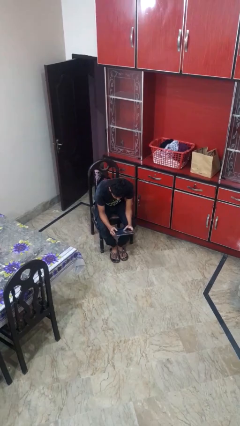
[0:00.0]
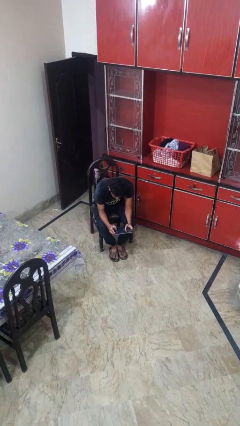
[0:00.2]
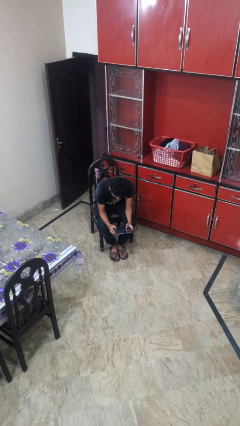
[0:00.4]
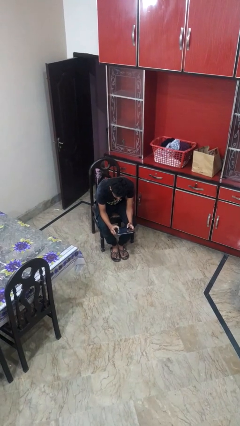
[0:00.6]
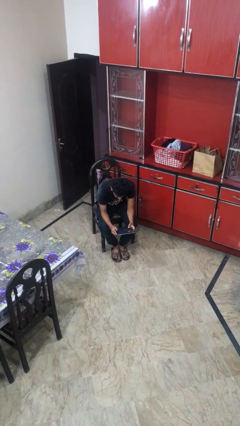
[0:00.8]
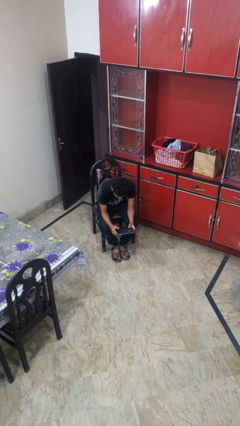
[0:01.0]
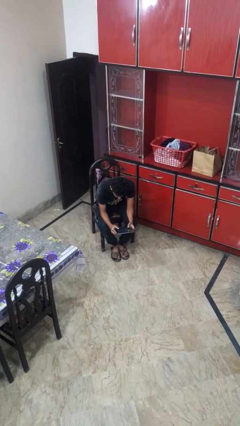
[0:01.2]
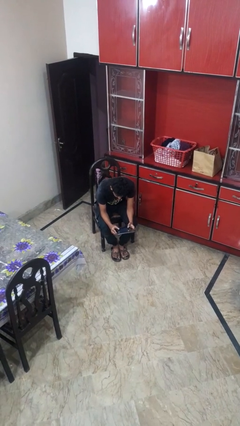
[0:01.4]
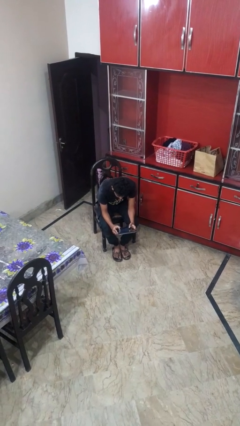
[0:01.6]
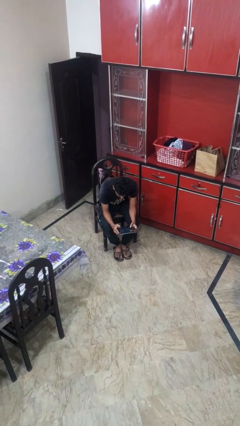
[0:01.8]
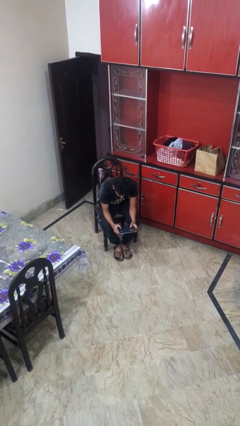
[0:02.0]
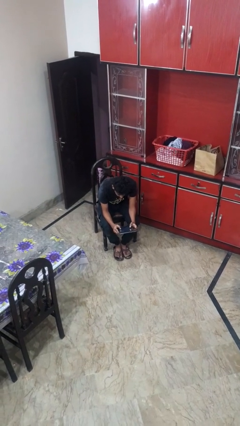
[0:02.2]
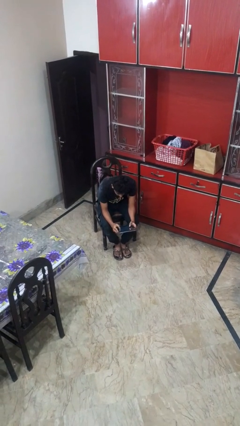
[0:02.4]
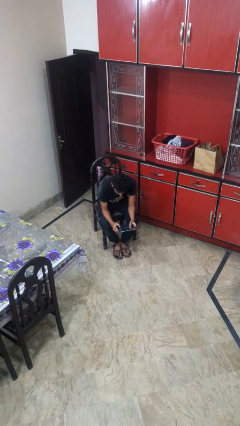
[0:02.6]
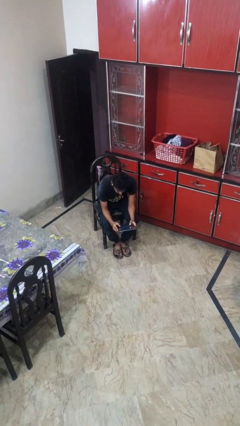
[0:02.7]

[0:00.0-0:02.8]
person interacts with tablet

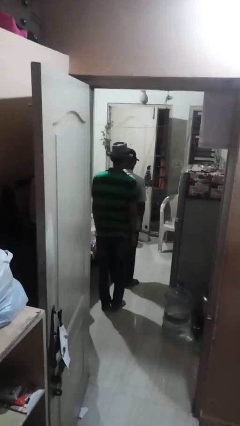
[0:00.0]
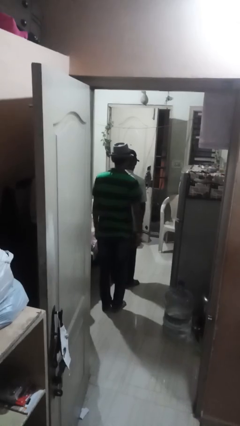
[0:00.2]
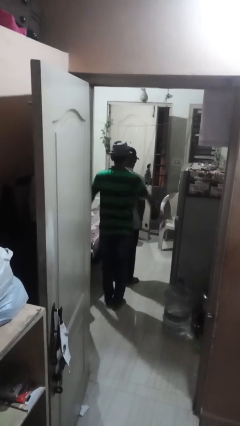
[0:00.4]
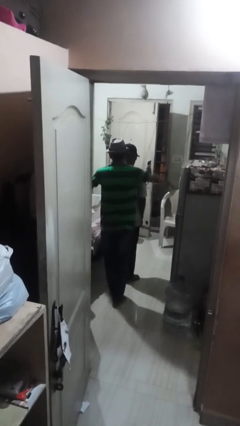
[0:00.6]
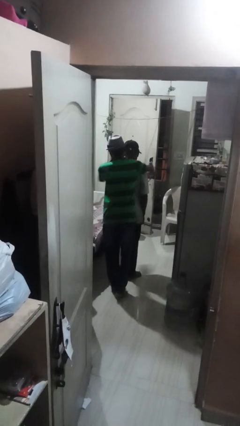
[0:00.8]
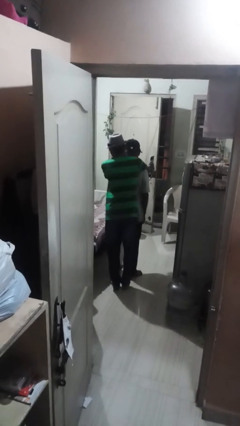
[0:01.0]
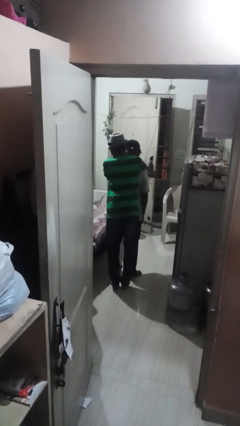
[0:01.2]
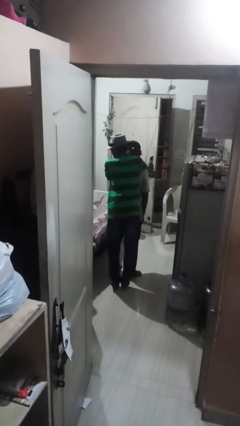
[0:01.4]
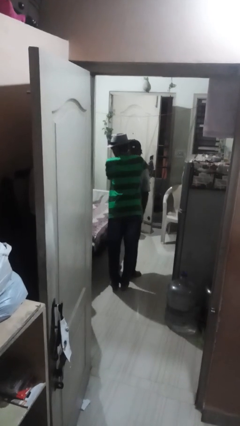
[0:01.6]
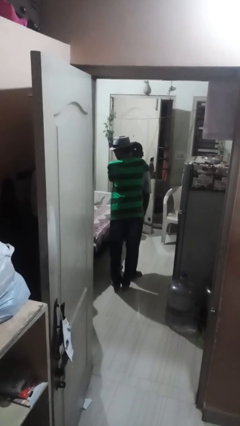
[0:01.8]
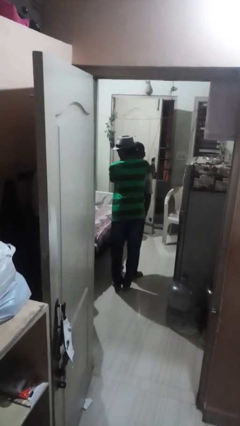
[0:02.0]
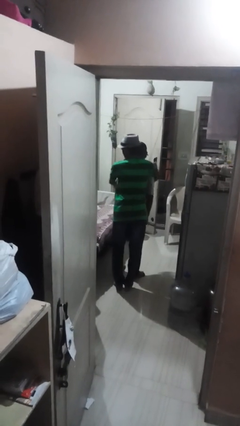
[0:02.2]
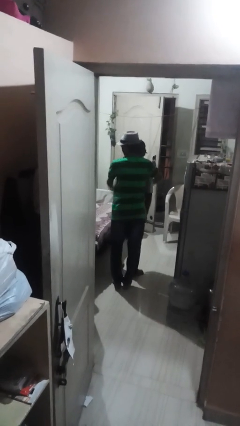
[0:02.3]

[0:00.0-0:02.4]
person hugs person from behind

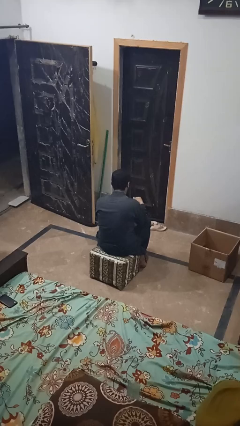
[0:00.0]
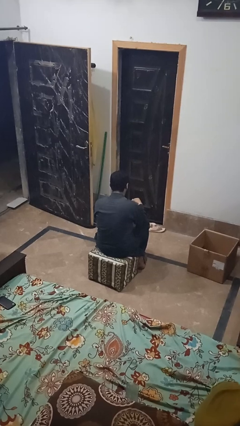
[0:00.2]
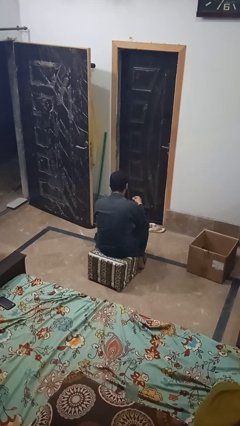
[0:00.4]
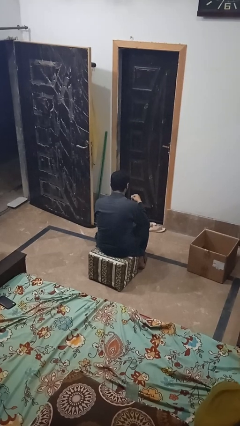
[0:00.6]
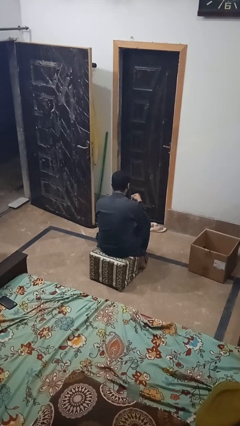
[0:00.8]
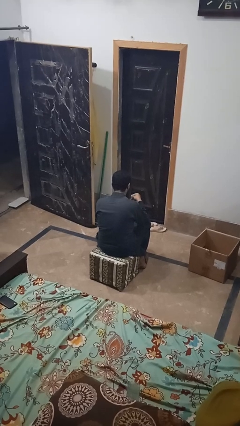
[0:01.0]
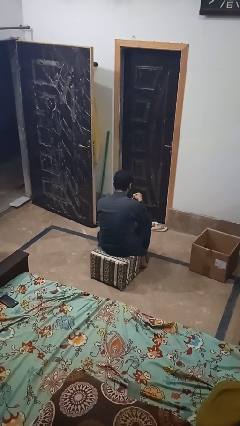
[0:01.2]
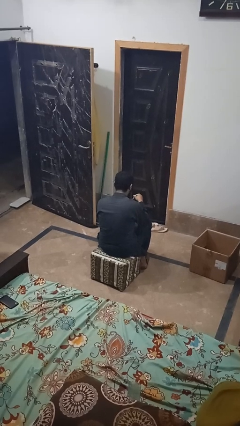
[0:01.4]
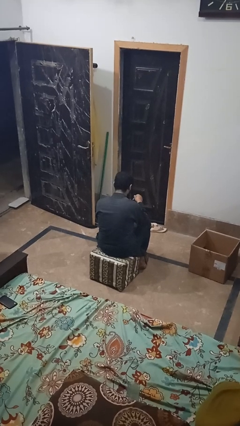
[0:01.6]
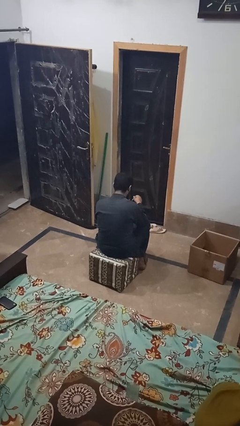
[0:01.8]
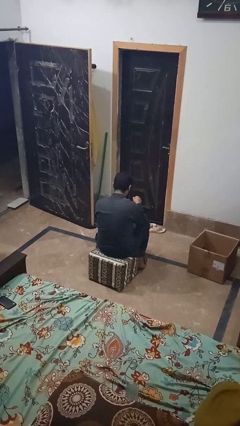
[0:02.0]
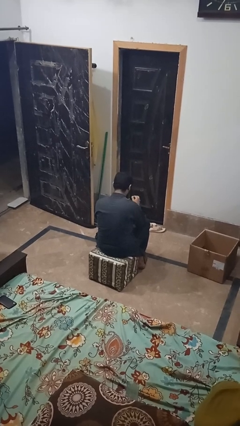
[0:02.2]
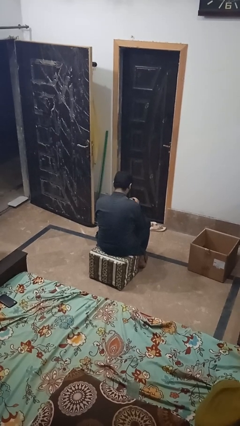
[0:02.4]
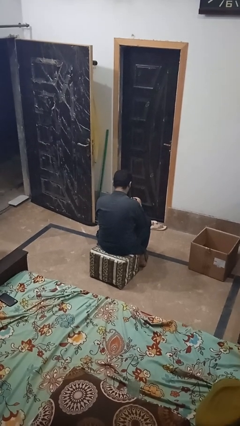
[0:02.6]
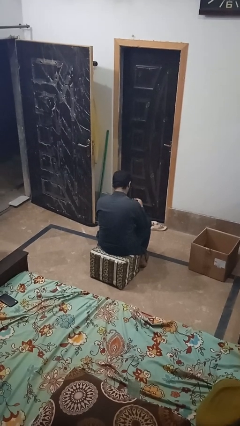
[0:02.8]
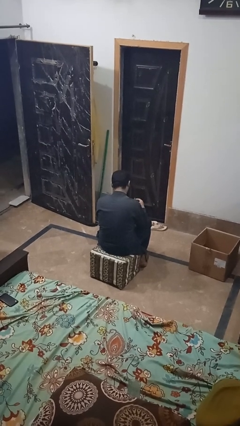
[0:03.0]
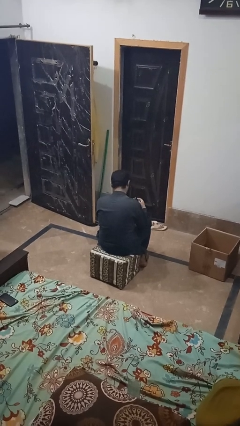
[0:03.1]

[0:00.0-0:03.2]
person stirs mug

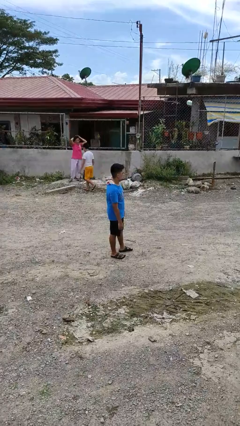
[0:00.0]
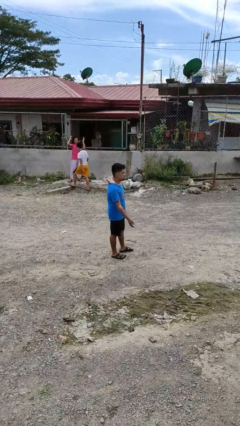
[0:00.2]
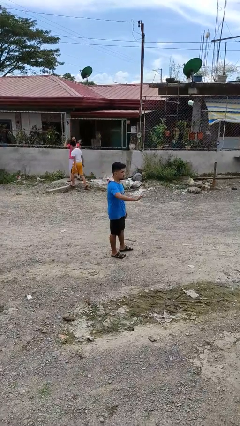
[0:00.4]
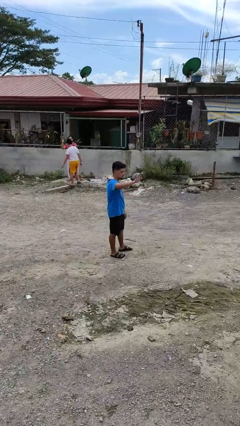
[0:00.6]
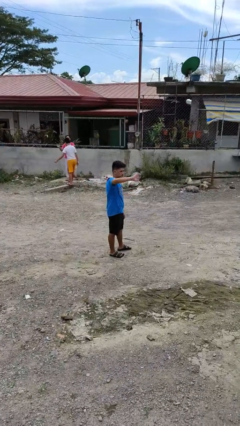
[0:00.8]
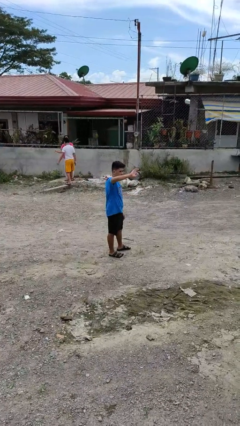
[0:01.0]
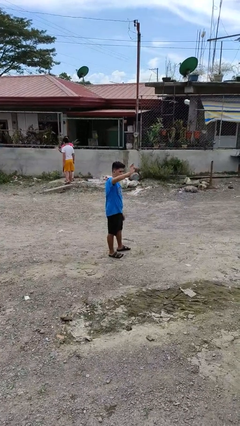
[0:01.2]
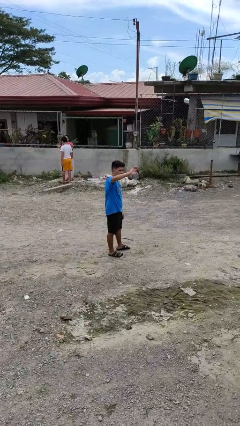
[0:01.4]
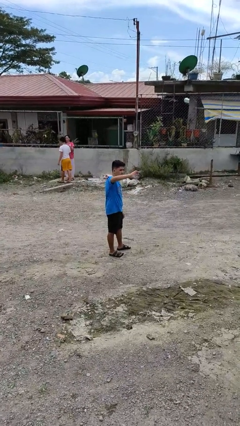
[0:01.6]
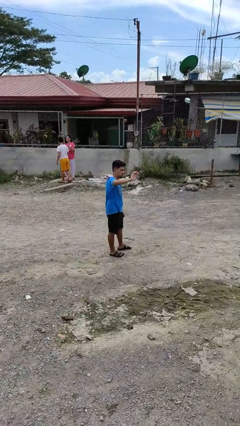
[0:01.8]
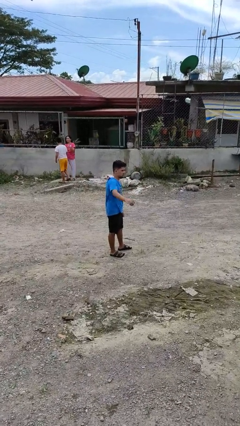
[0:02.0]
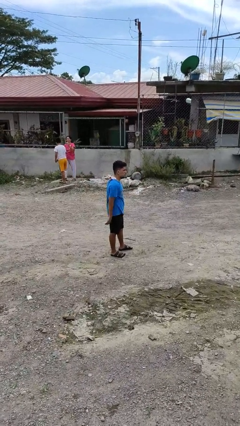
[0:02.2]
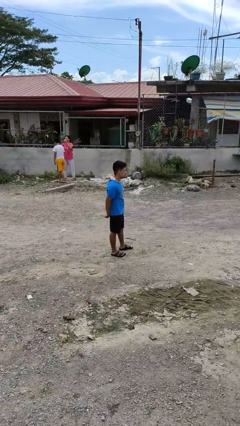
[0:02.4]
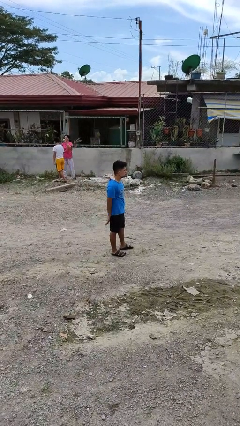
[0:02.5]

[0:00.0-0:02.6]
person waves at person

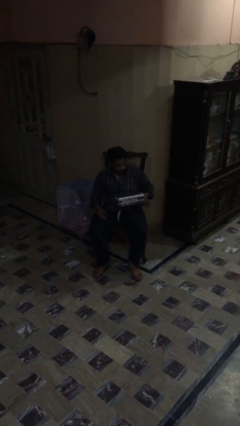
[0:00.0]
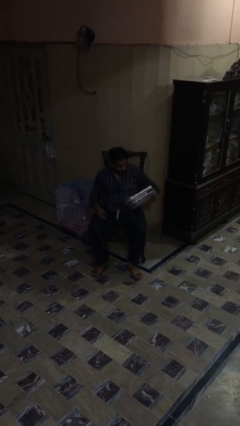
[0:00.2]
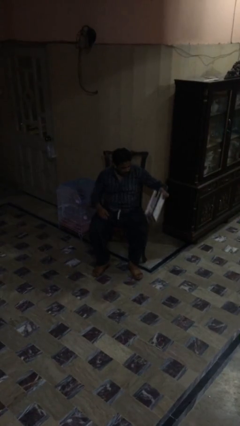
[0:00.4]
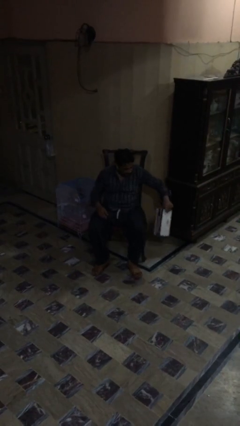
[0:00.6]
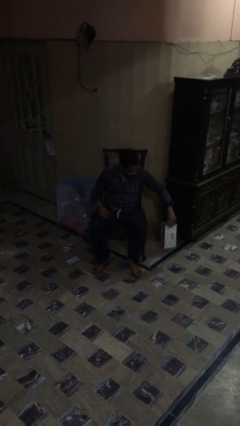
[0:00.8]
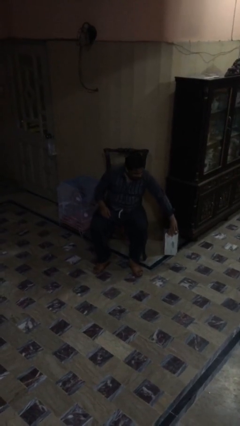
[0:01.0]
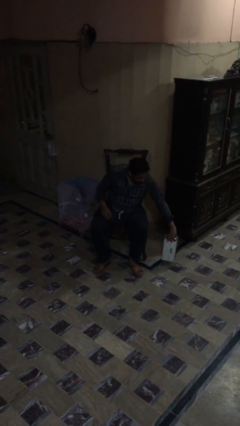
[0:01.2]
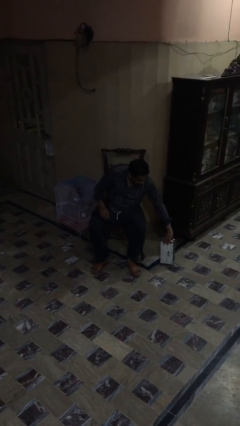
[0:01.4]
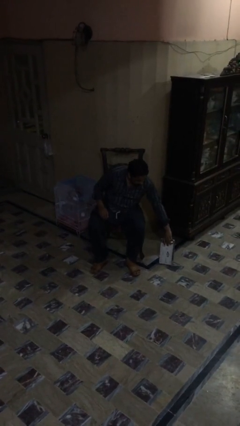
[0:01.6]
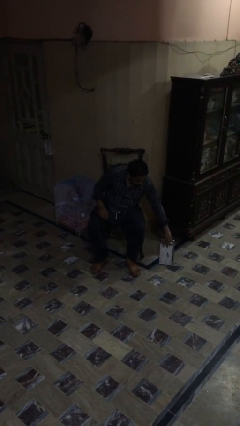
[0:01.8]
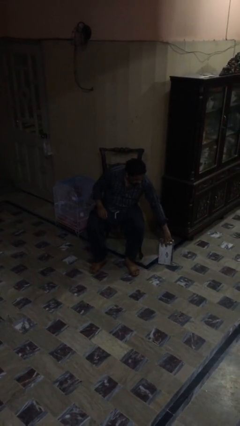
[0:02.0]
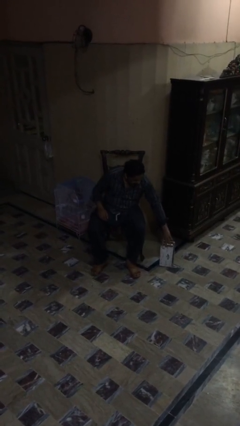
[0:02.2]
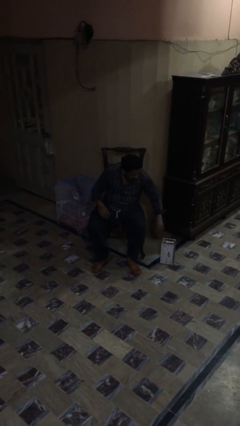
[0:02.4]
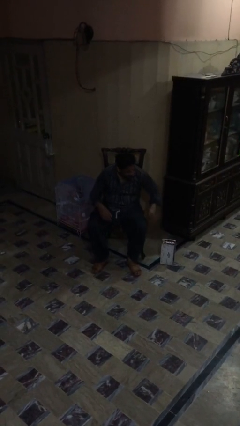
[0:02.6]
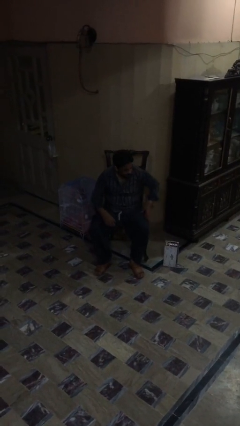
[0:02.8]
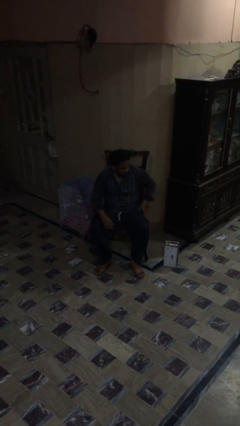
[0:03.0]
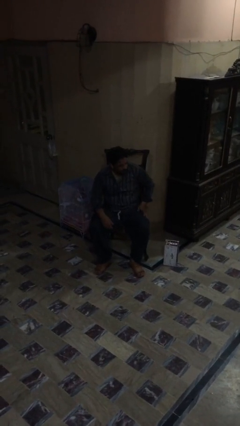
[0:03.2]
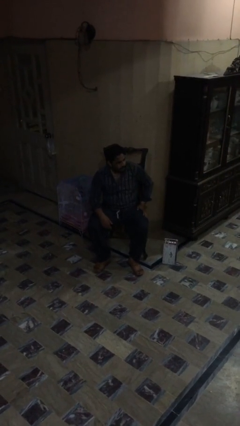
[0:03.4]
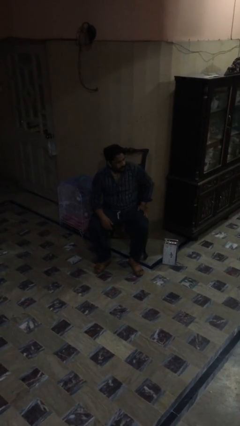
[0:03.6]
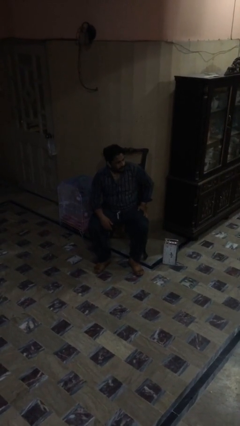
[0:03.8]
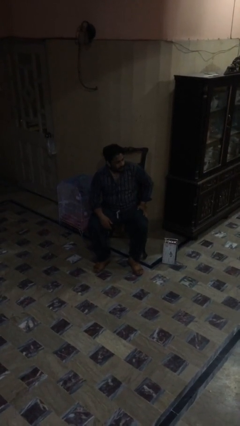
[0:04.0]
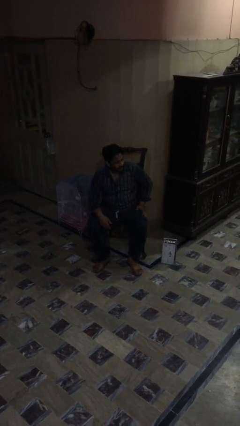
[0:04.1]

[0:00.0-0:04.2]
person puts down object on floor

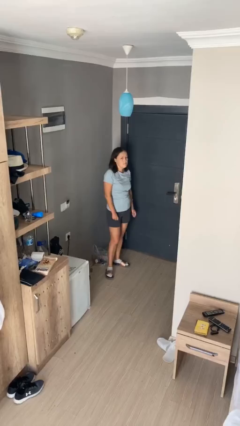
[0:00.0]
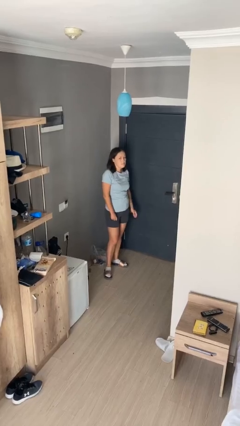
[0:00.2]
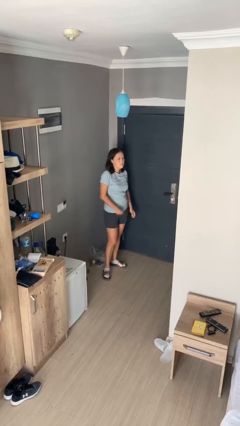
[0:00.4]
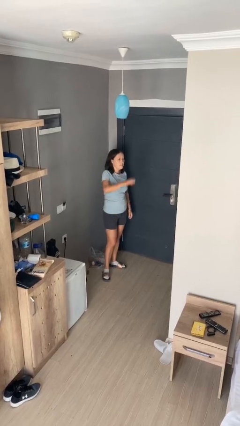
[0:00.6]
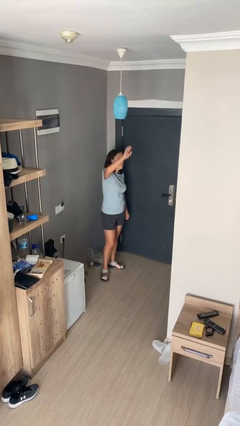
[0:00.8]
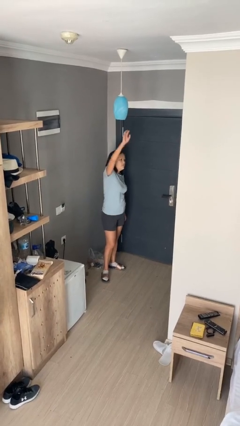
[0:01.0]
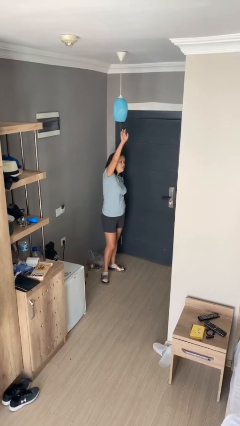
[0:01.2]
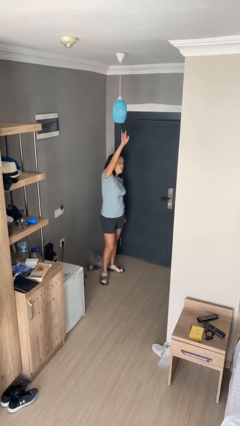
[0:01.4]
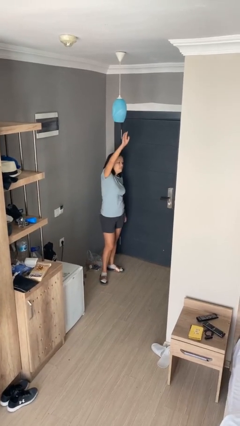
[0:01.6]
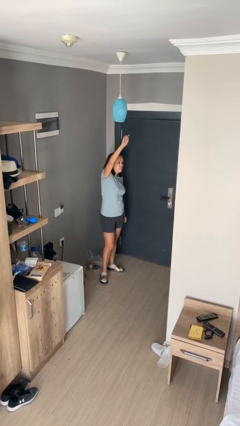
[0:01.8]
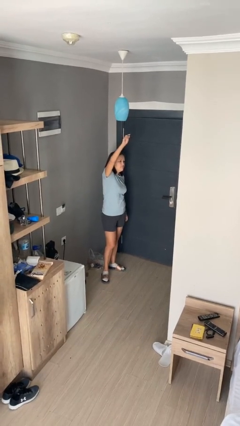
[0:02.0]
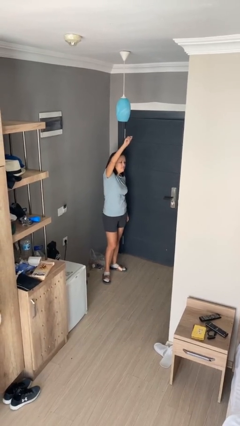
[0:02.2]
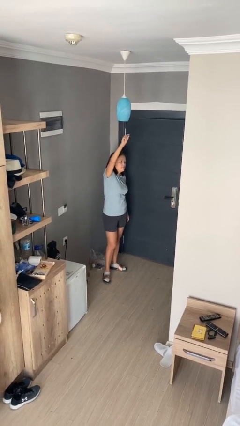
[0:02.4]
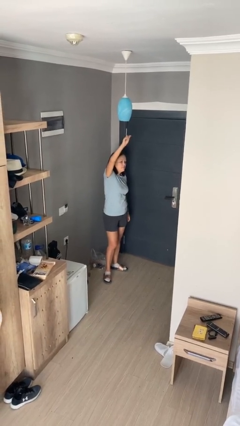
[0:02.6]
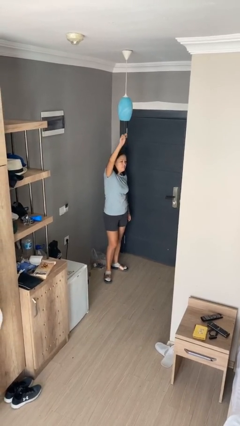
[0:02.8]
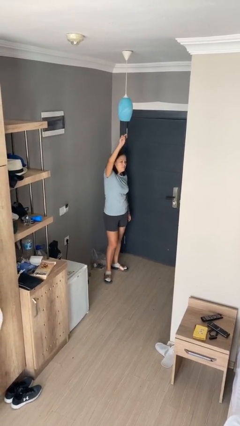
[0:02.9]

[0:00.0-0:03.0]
person gestures raise hand
